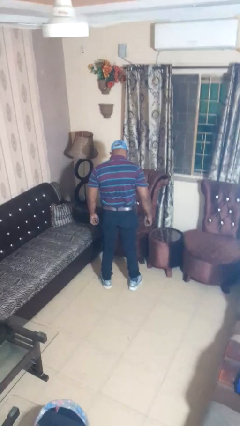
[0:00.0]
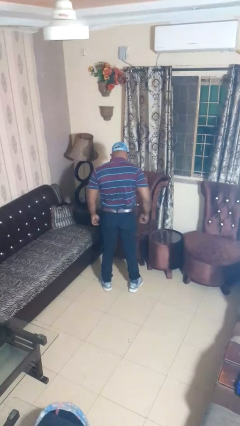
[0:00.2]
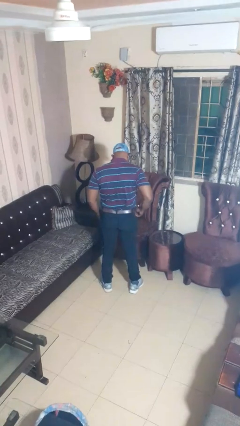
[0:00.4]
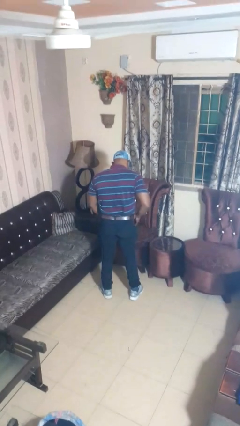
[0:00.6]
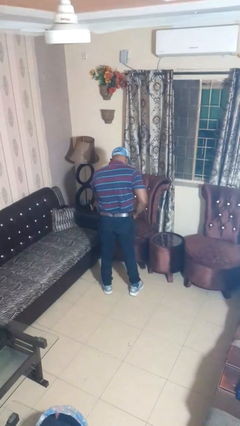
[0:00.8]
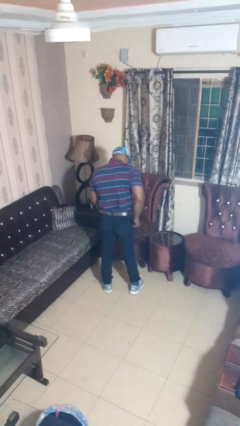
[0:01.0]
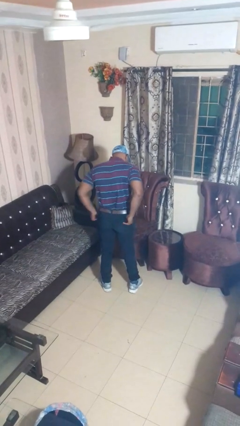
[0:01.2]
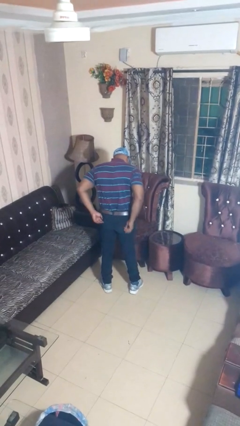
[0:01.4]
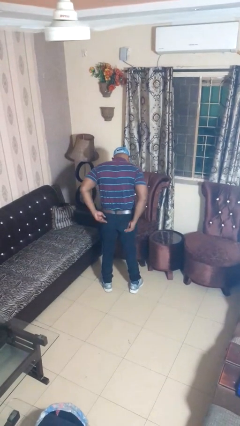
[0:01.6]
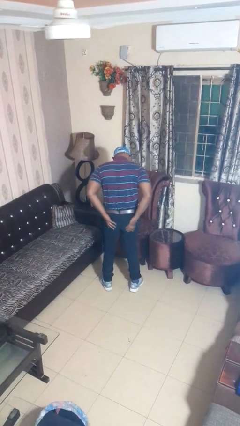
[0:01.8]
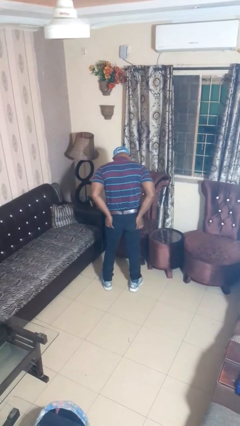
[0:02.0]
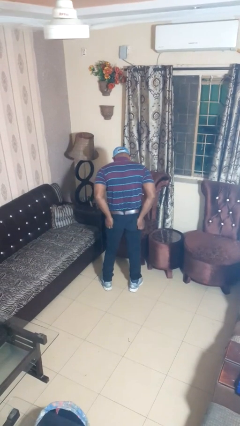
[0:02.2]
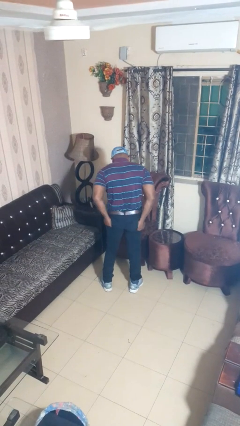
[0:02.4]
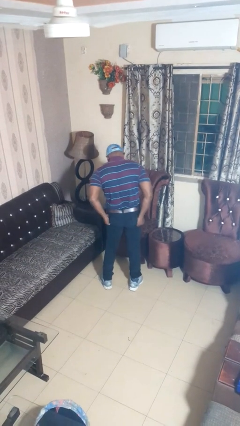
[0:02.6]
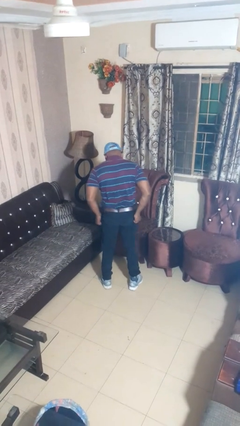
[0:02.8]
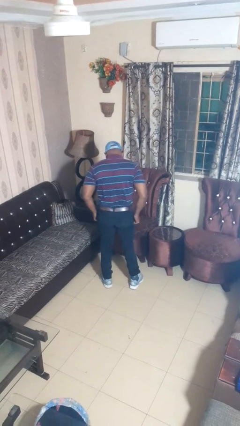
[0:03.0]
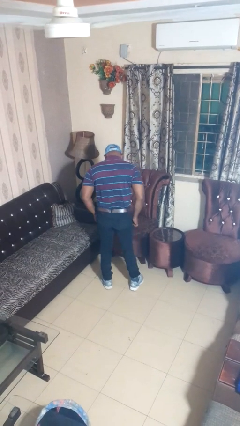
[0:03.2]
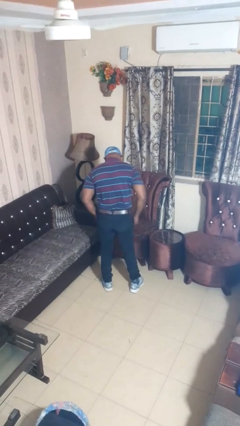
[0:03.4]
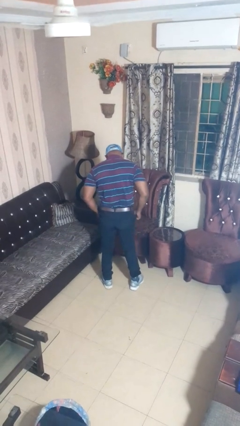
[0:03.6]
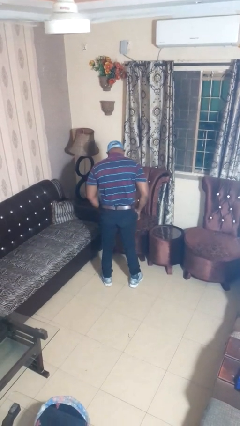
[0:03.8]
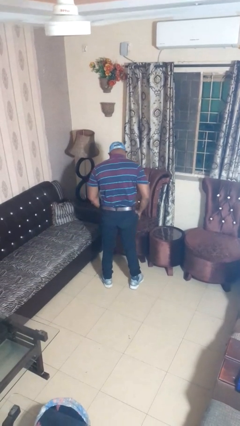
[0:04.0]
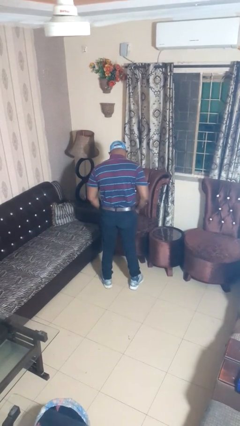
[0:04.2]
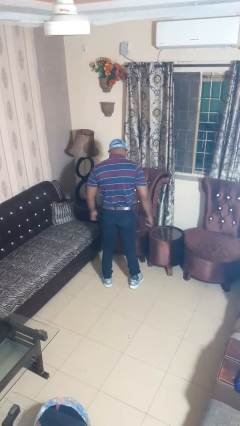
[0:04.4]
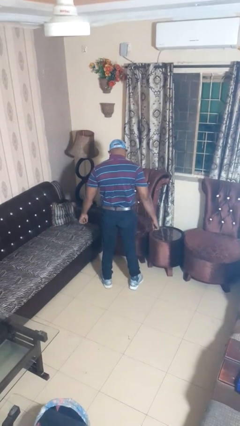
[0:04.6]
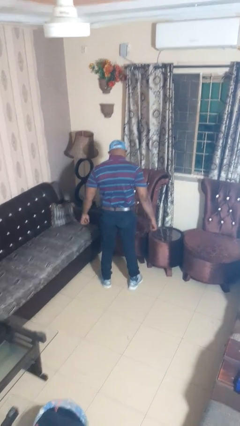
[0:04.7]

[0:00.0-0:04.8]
person hikes up pants

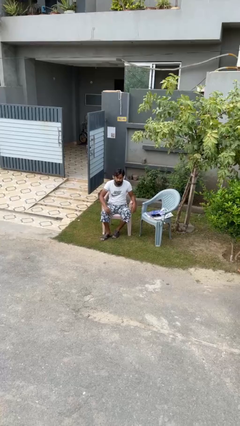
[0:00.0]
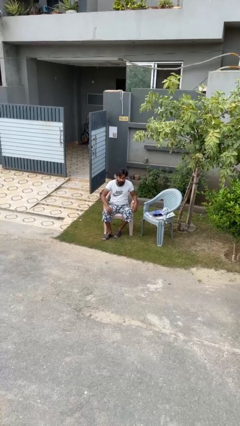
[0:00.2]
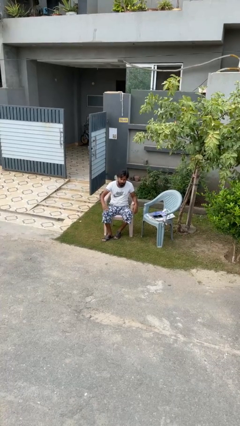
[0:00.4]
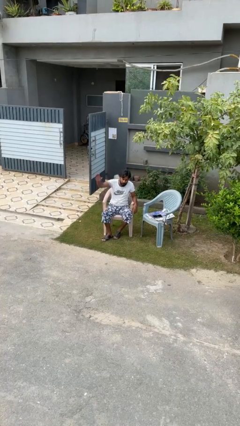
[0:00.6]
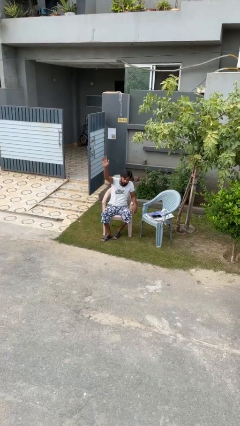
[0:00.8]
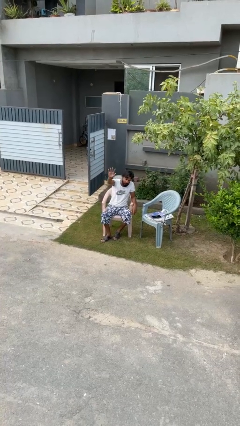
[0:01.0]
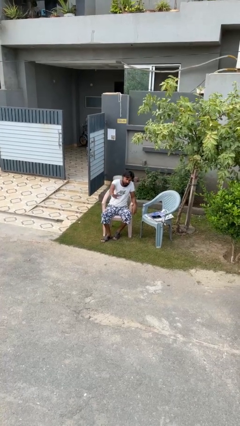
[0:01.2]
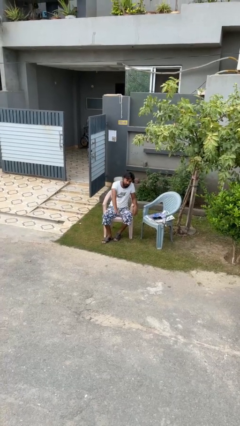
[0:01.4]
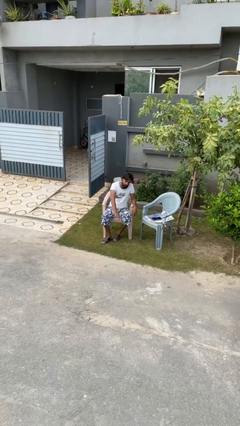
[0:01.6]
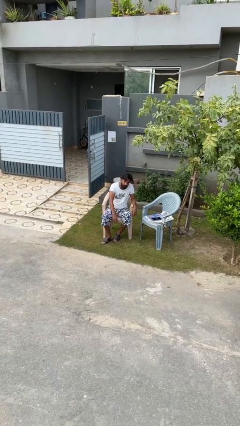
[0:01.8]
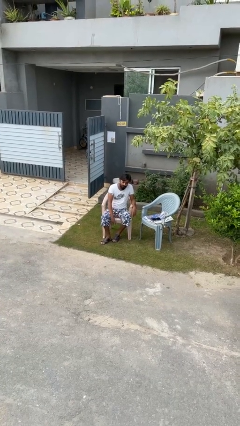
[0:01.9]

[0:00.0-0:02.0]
person gestures swipe down

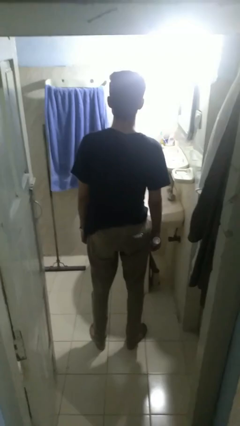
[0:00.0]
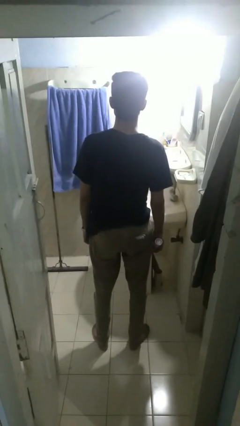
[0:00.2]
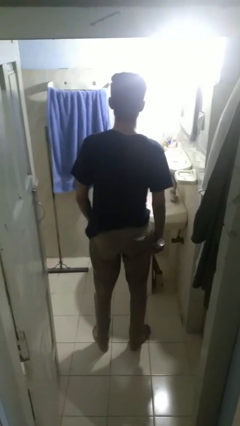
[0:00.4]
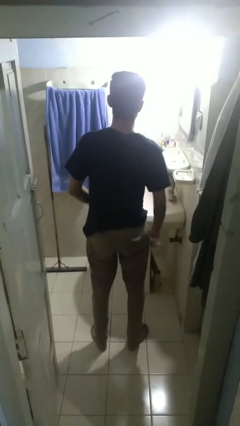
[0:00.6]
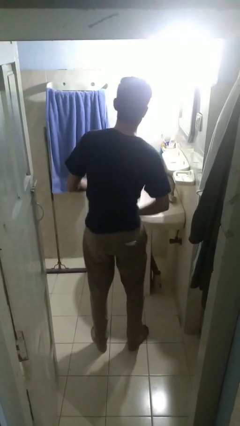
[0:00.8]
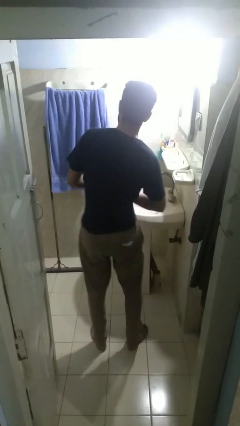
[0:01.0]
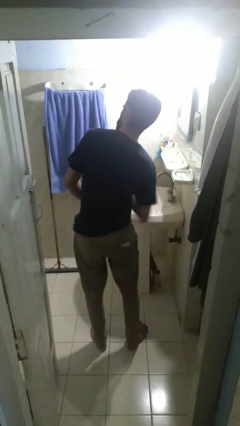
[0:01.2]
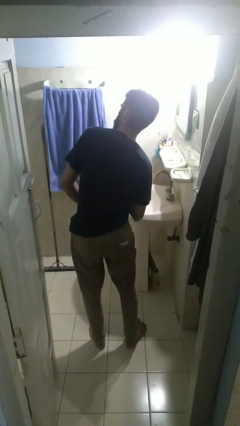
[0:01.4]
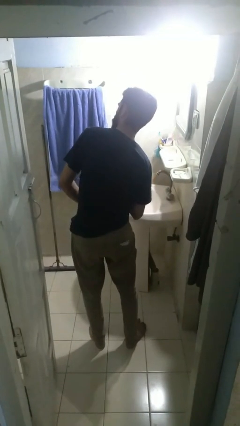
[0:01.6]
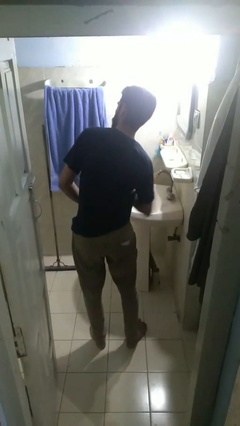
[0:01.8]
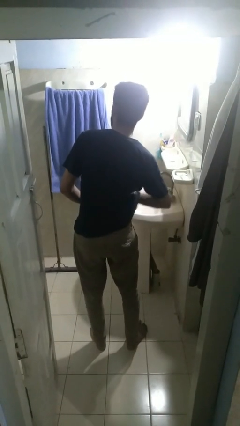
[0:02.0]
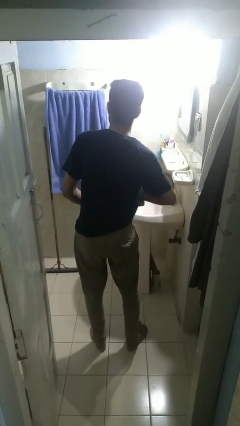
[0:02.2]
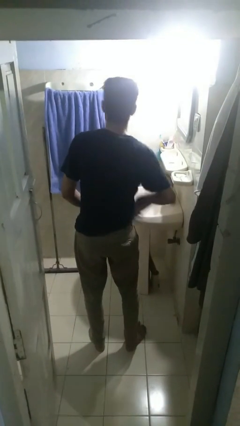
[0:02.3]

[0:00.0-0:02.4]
person applies deodorant

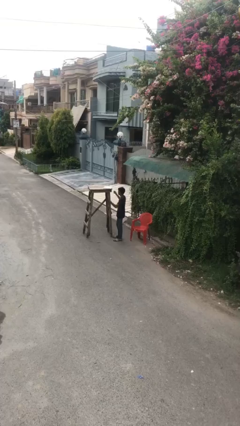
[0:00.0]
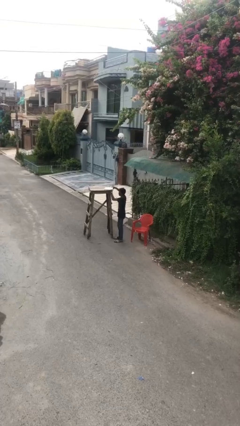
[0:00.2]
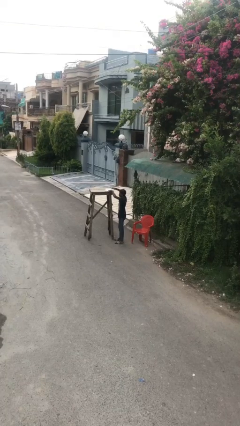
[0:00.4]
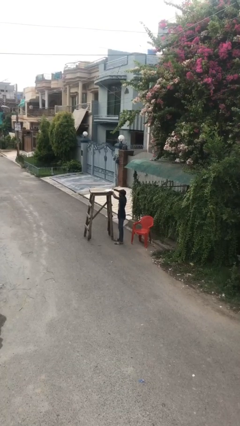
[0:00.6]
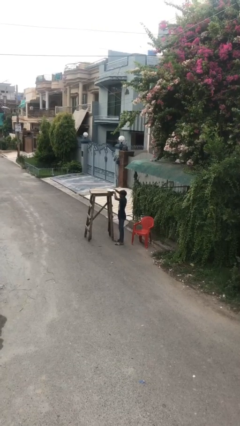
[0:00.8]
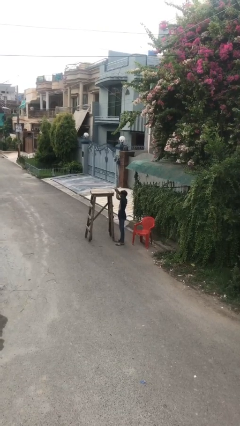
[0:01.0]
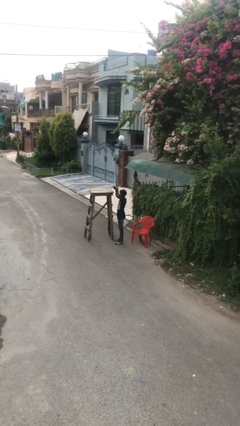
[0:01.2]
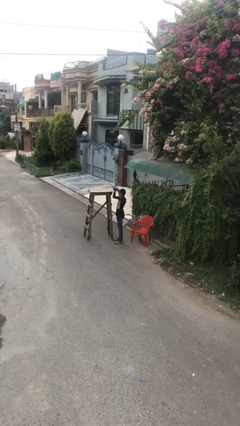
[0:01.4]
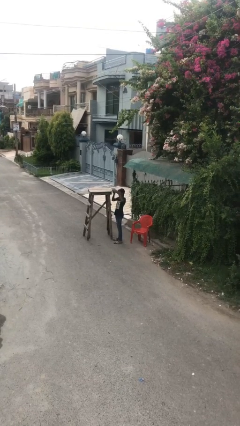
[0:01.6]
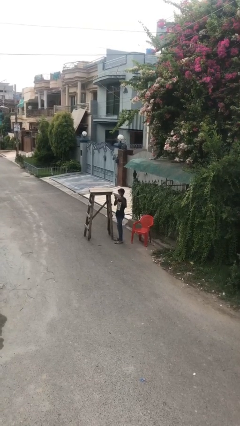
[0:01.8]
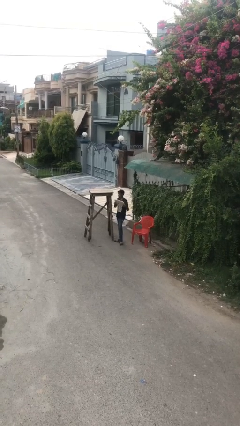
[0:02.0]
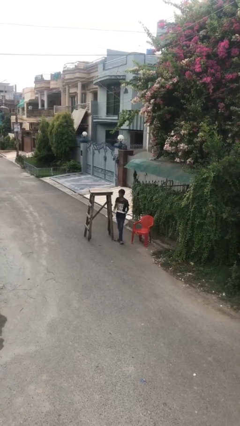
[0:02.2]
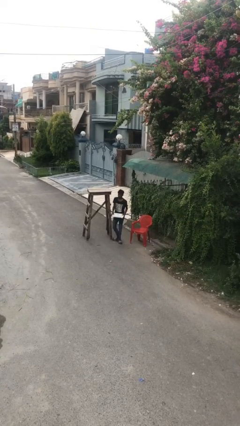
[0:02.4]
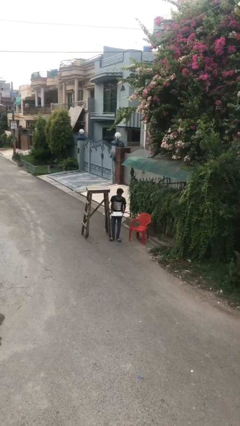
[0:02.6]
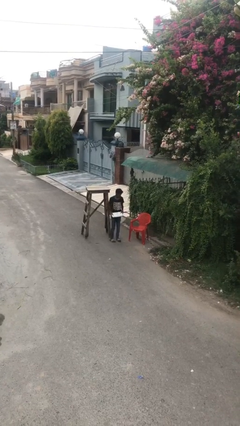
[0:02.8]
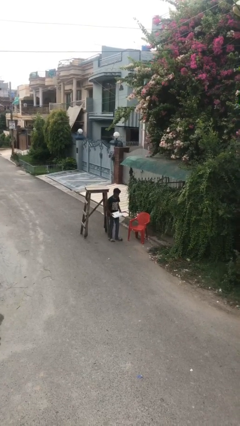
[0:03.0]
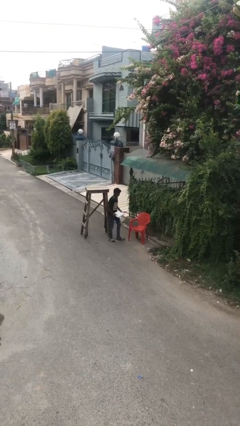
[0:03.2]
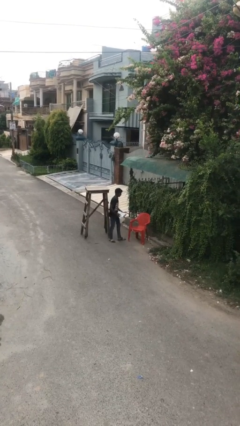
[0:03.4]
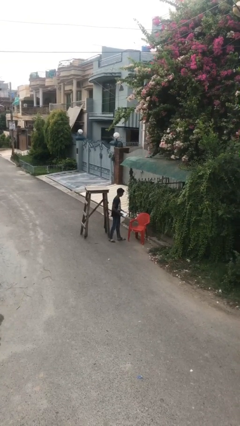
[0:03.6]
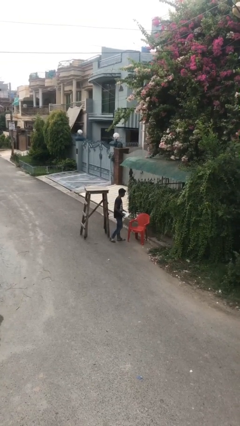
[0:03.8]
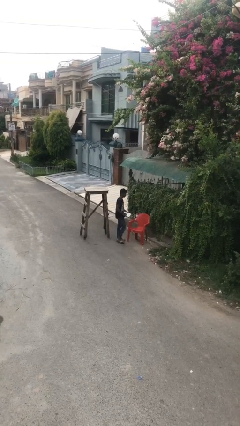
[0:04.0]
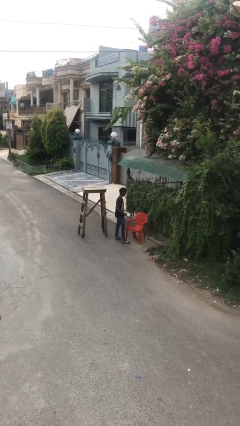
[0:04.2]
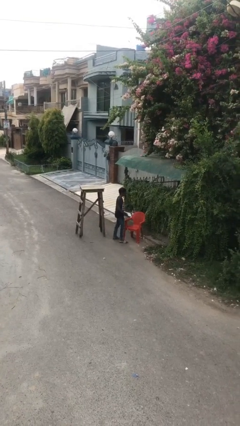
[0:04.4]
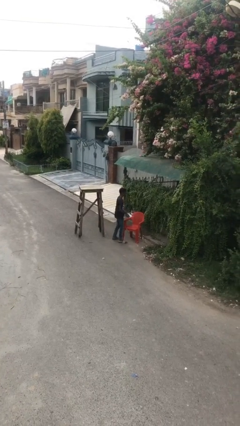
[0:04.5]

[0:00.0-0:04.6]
person picks up object from shelf

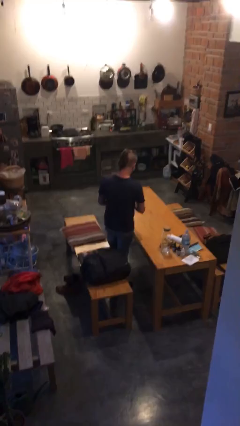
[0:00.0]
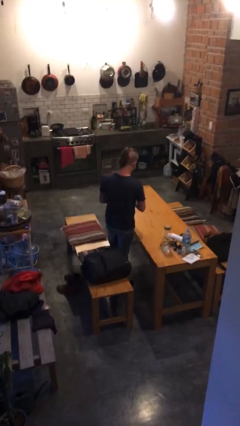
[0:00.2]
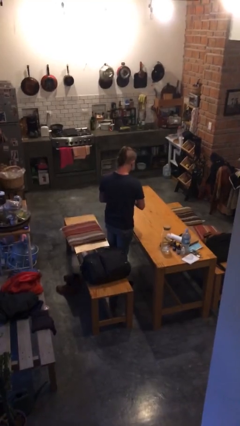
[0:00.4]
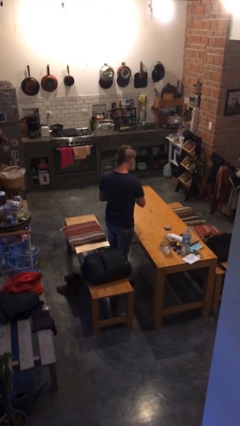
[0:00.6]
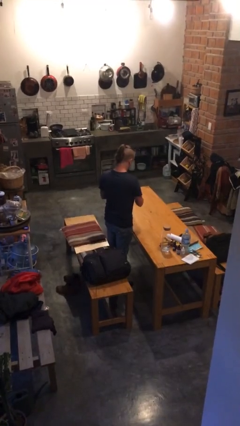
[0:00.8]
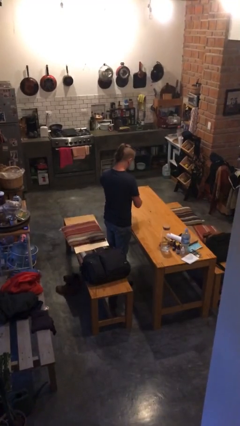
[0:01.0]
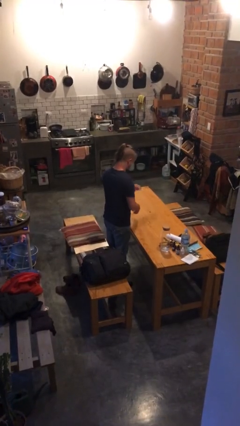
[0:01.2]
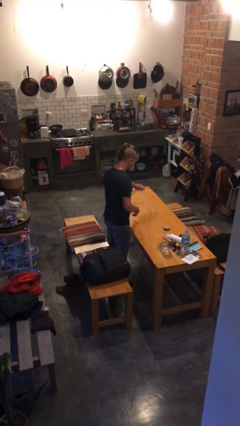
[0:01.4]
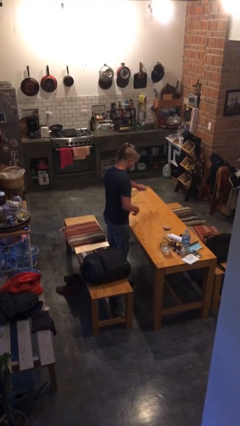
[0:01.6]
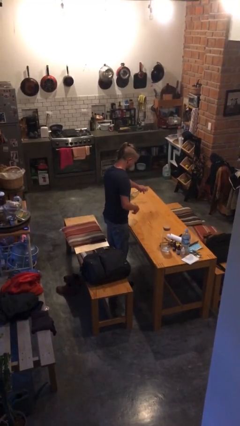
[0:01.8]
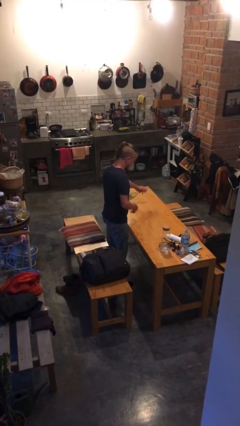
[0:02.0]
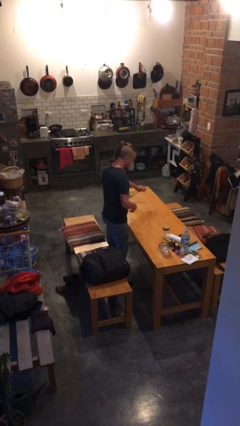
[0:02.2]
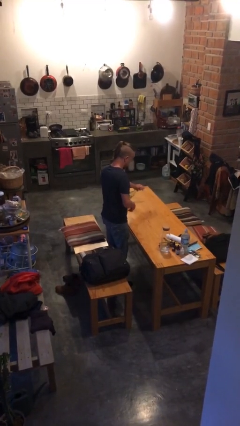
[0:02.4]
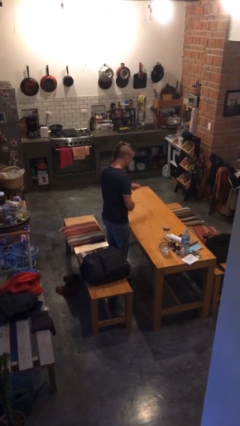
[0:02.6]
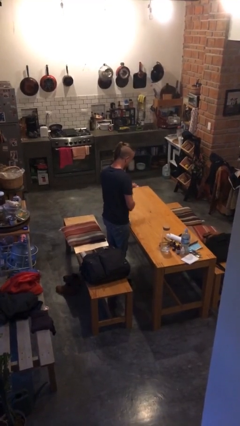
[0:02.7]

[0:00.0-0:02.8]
person sprays from bottle
